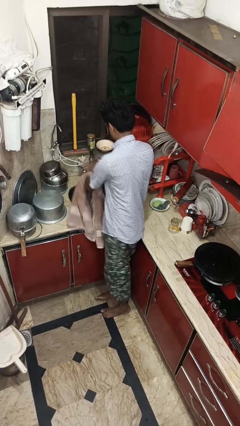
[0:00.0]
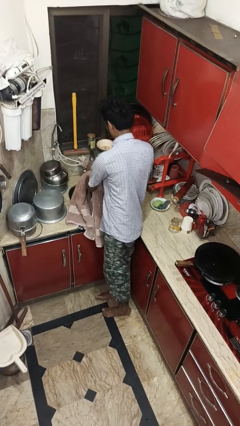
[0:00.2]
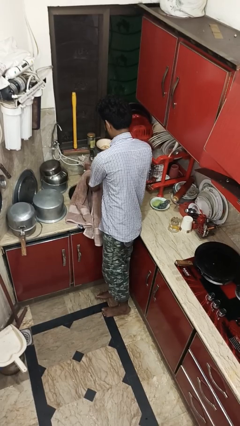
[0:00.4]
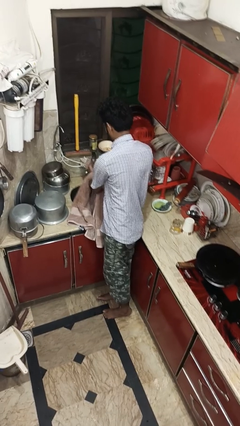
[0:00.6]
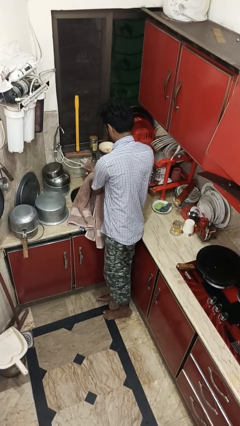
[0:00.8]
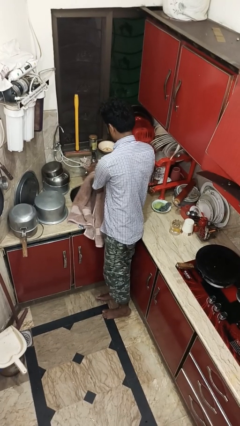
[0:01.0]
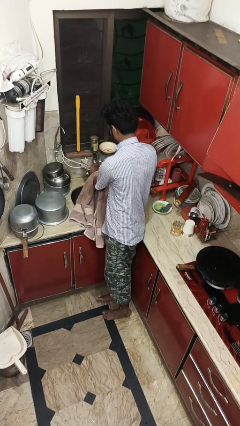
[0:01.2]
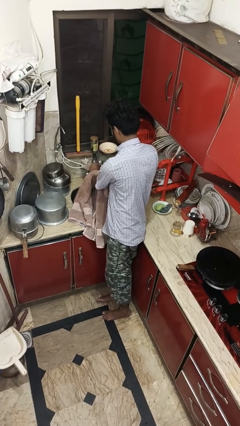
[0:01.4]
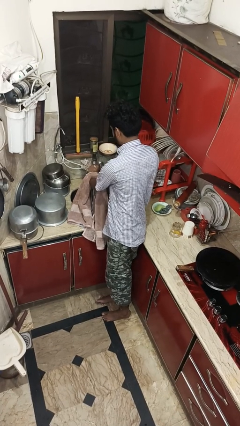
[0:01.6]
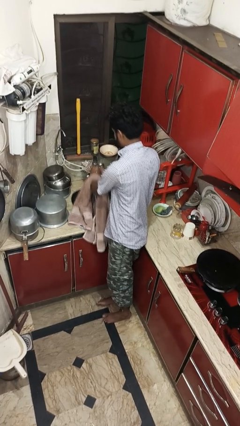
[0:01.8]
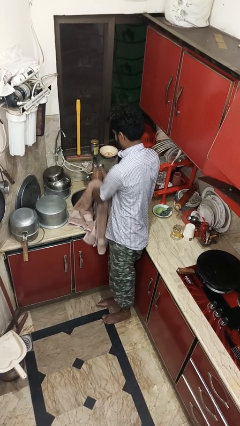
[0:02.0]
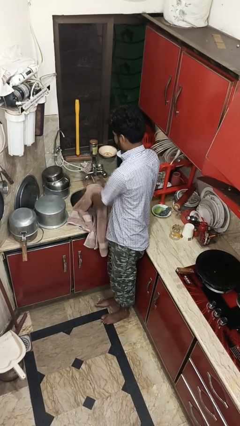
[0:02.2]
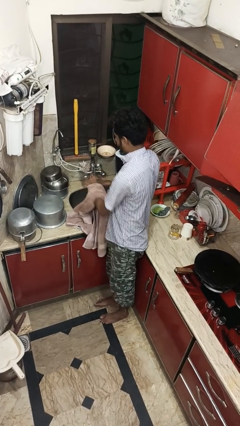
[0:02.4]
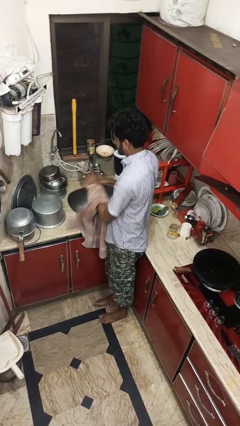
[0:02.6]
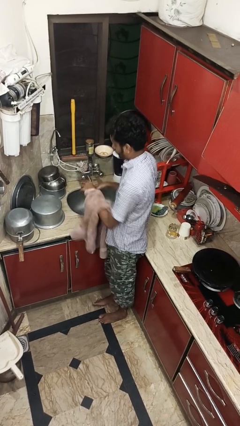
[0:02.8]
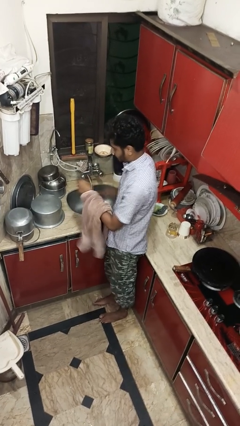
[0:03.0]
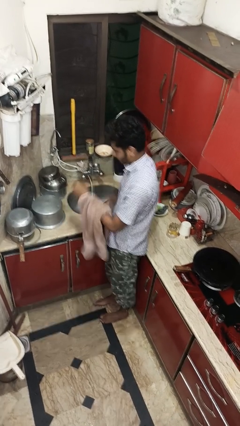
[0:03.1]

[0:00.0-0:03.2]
person washes hands

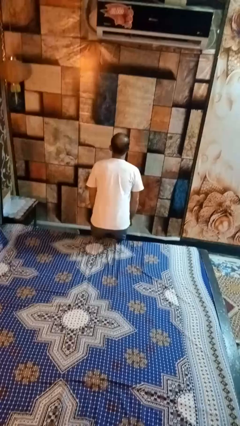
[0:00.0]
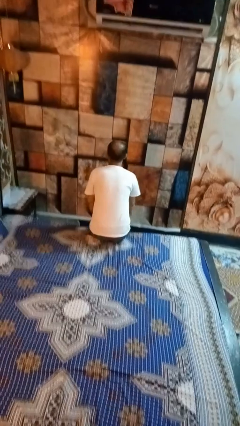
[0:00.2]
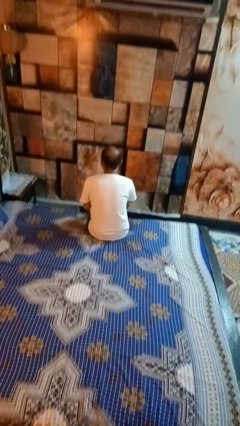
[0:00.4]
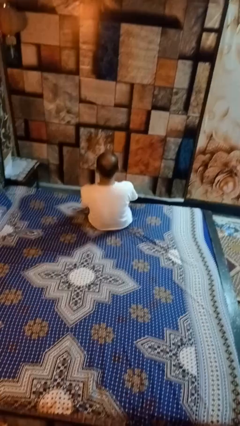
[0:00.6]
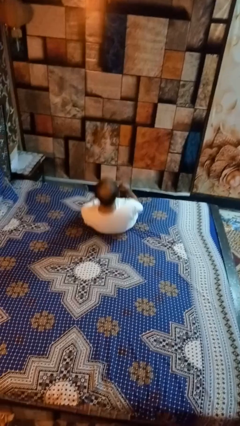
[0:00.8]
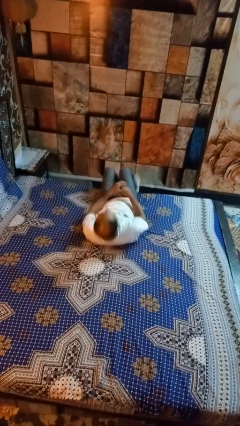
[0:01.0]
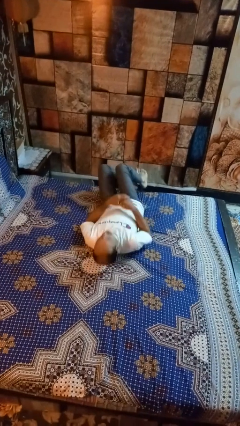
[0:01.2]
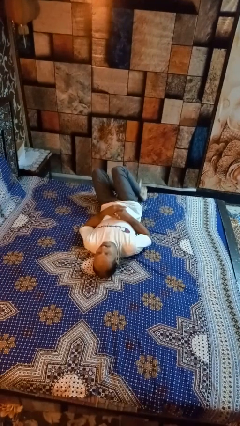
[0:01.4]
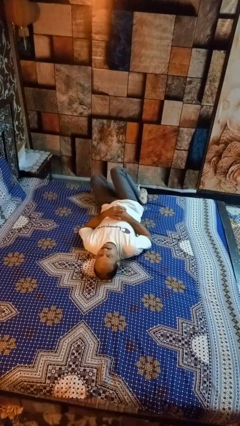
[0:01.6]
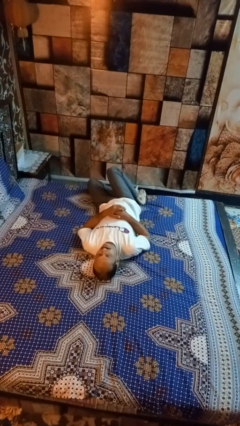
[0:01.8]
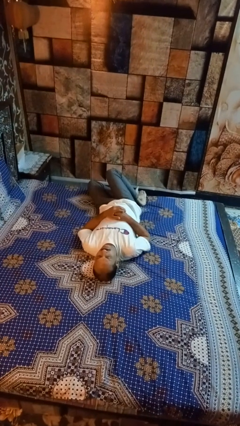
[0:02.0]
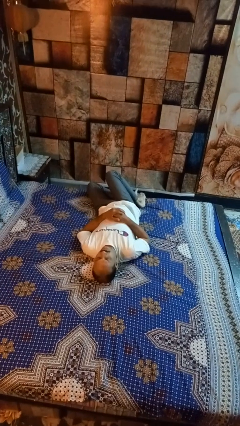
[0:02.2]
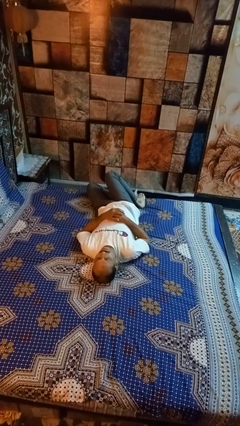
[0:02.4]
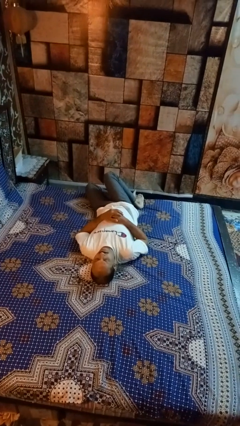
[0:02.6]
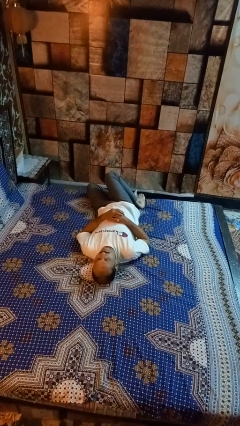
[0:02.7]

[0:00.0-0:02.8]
person lies down on bed

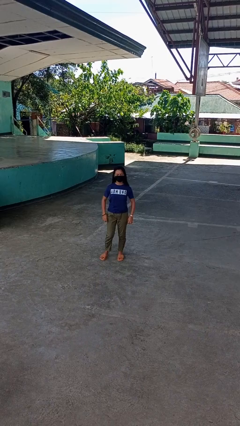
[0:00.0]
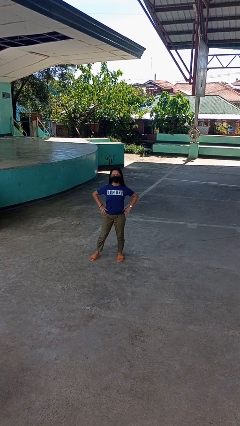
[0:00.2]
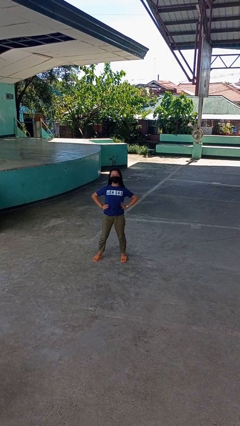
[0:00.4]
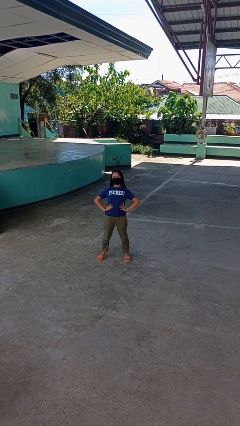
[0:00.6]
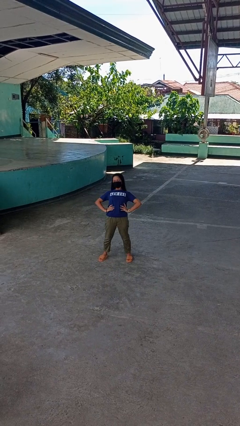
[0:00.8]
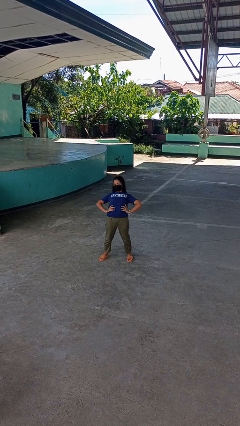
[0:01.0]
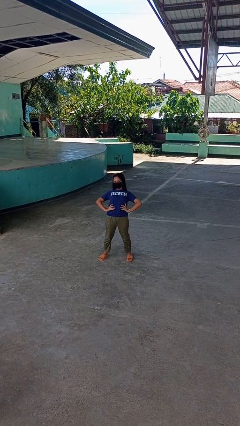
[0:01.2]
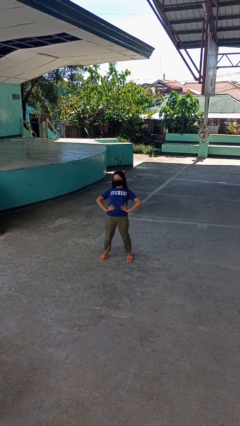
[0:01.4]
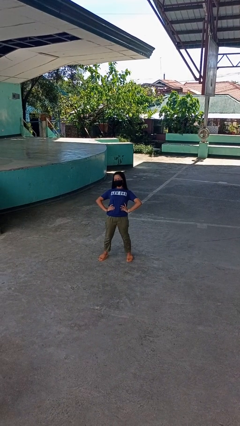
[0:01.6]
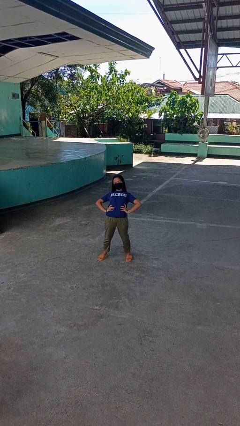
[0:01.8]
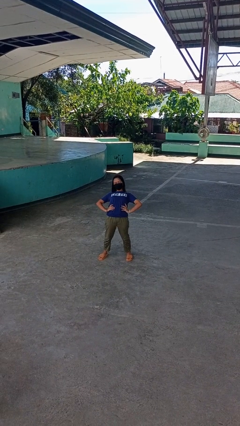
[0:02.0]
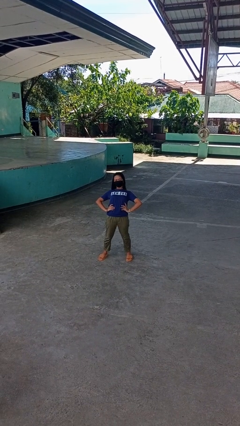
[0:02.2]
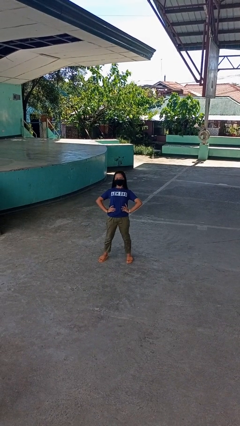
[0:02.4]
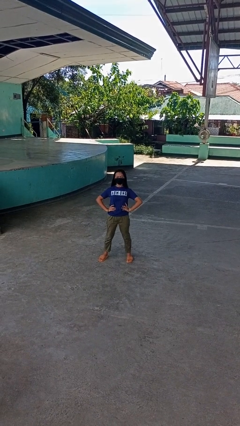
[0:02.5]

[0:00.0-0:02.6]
person stretches back

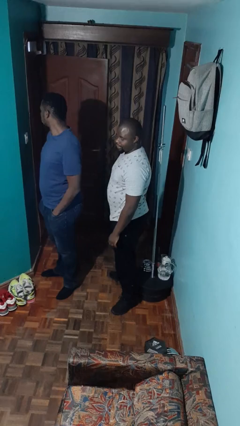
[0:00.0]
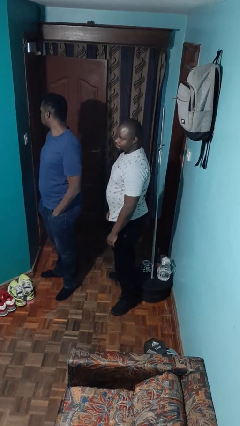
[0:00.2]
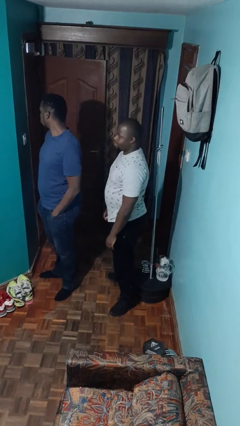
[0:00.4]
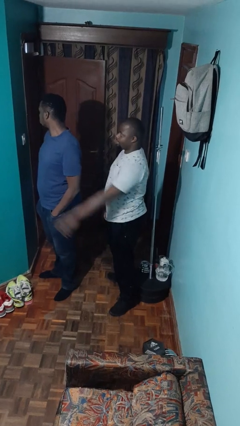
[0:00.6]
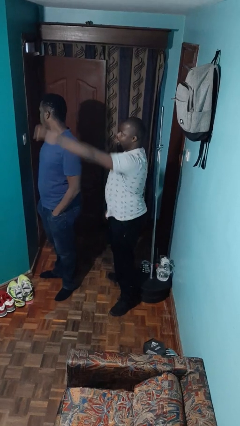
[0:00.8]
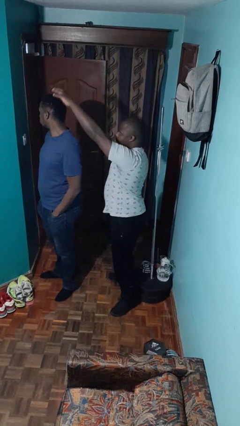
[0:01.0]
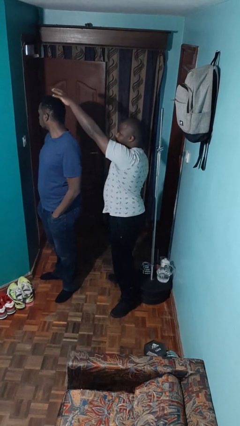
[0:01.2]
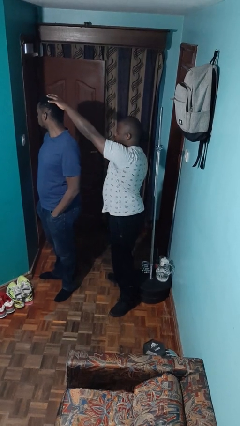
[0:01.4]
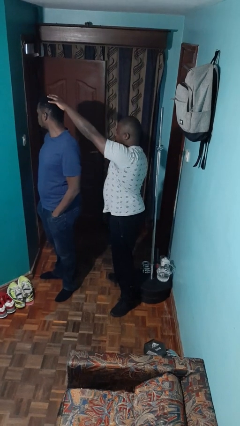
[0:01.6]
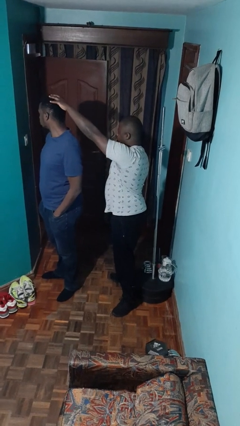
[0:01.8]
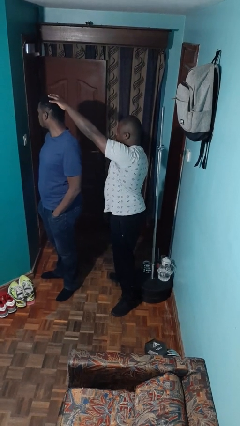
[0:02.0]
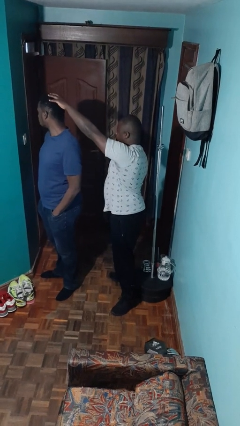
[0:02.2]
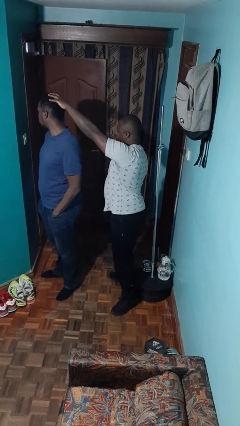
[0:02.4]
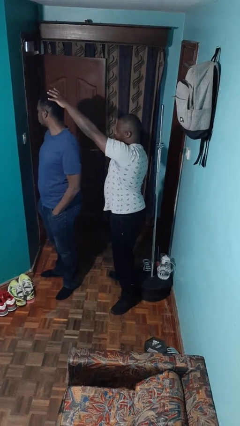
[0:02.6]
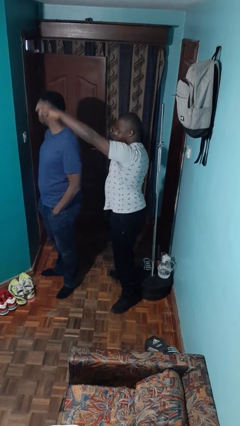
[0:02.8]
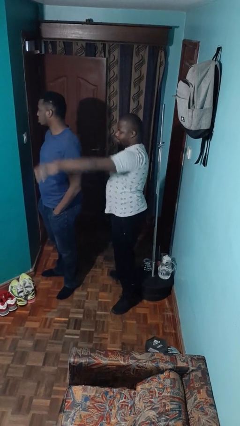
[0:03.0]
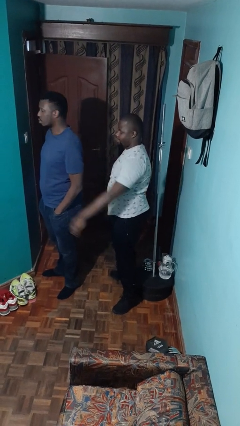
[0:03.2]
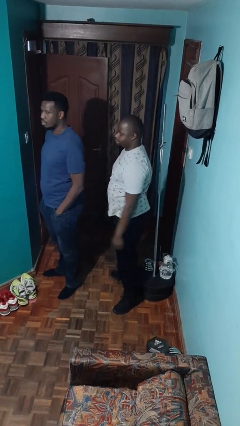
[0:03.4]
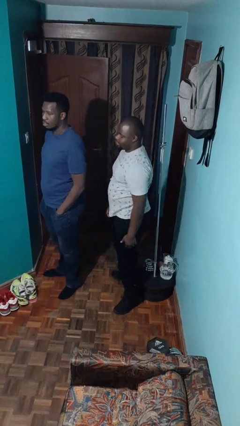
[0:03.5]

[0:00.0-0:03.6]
person grabs person by hair

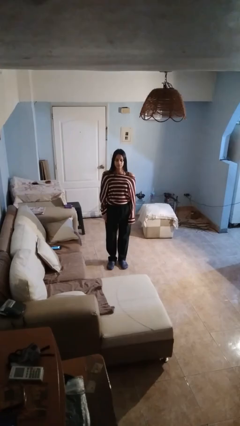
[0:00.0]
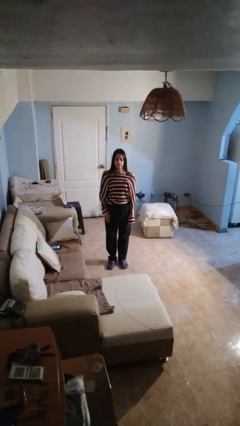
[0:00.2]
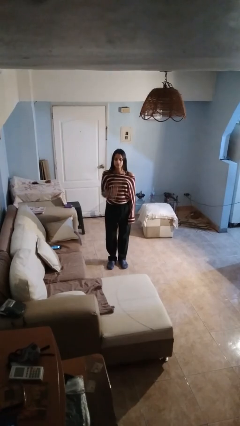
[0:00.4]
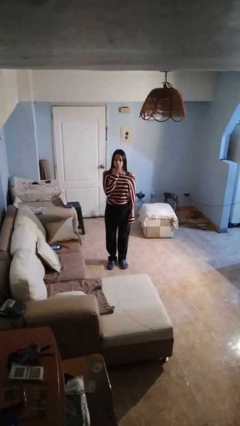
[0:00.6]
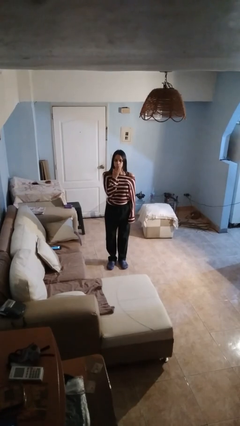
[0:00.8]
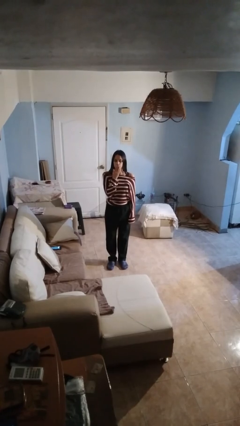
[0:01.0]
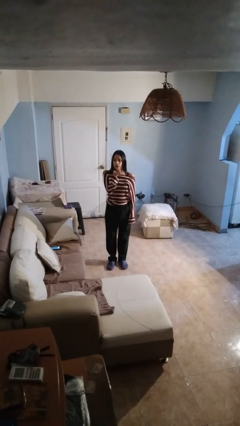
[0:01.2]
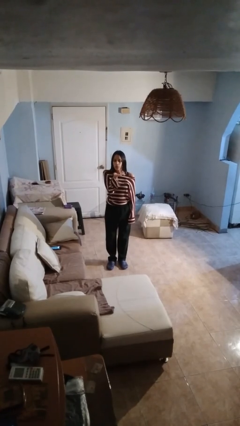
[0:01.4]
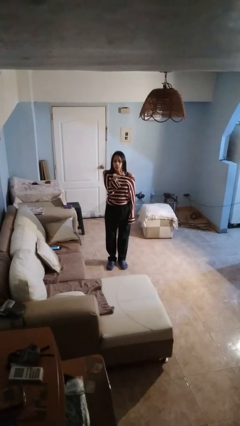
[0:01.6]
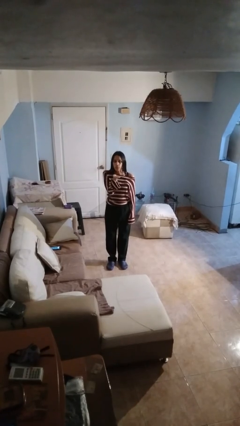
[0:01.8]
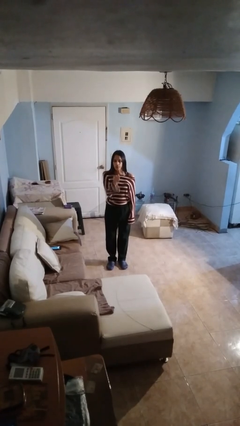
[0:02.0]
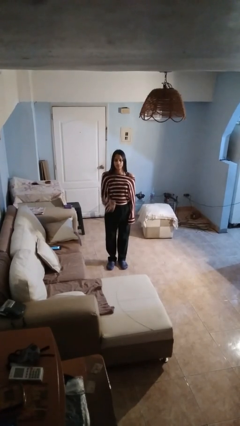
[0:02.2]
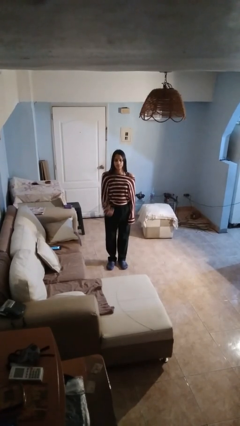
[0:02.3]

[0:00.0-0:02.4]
person gestures blow kiss

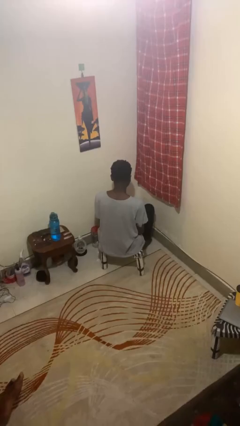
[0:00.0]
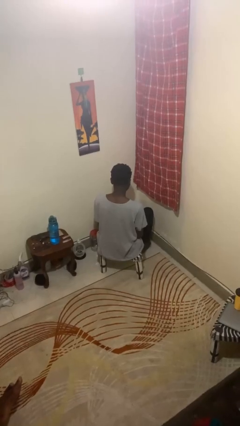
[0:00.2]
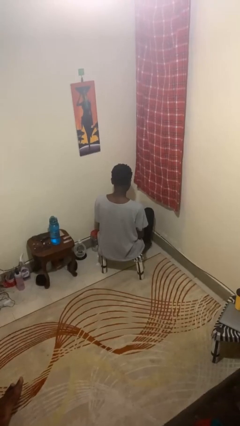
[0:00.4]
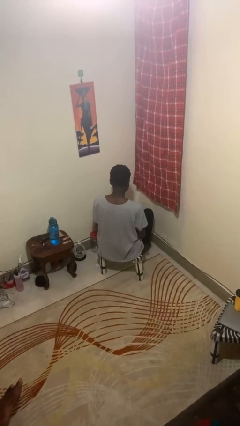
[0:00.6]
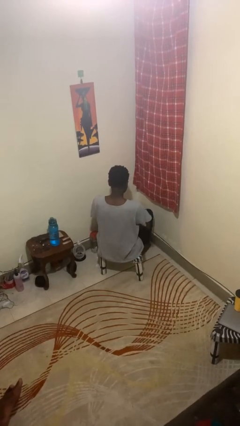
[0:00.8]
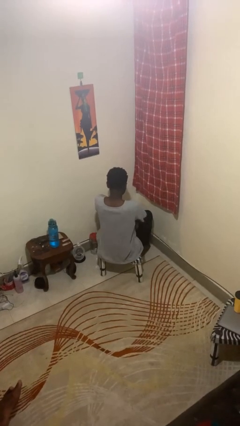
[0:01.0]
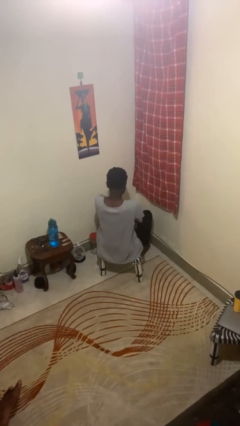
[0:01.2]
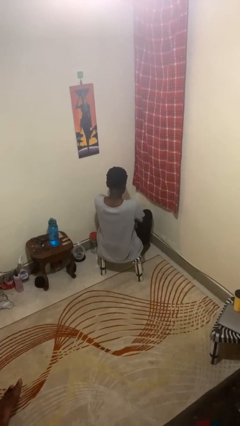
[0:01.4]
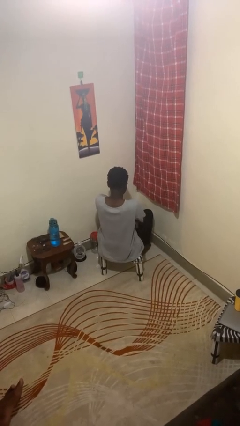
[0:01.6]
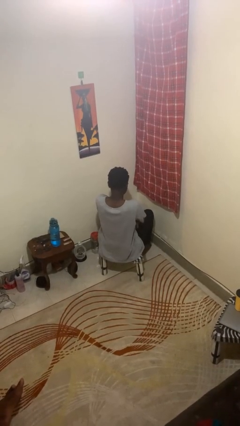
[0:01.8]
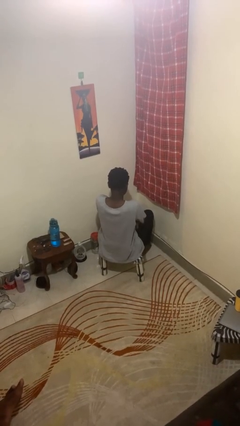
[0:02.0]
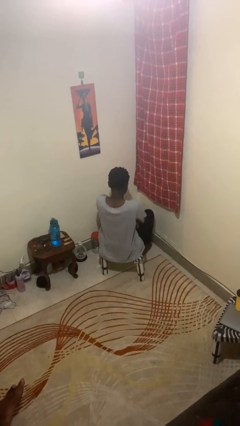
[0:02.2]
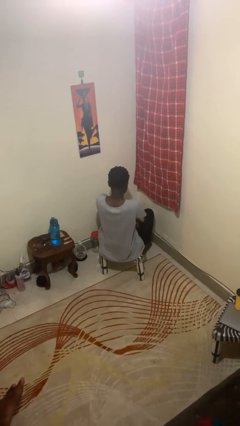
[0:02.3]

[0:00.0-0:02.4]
person crosses arms

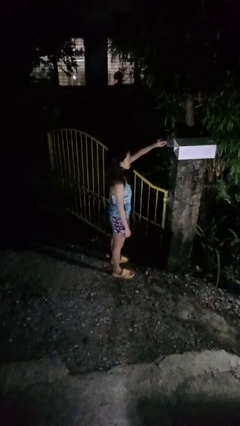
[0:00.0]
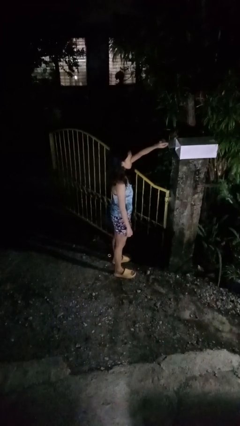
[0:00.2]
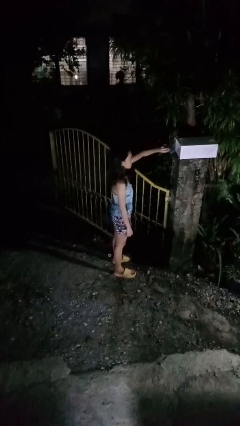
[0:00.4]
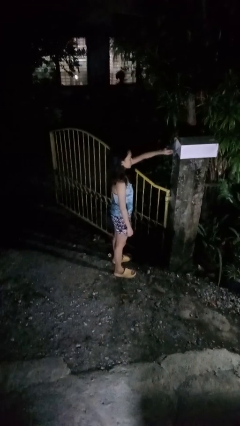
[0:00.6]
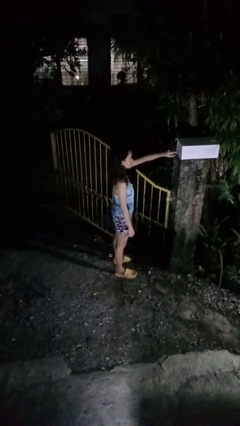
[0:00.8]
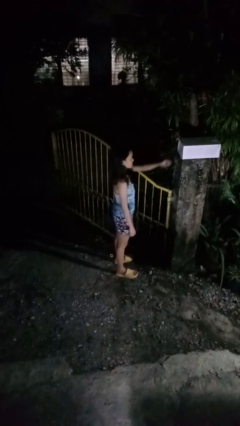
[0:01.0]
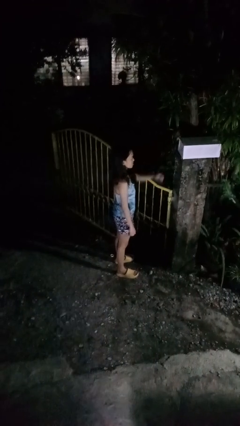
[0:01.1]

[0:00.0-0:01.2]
person closes mailbox
